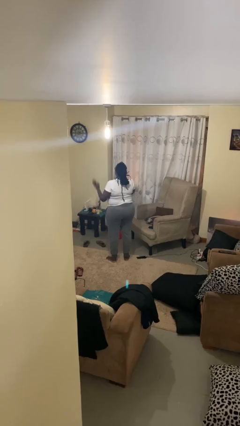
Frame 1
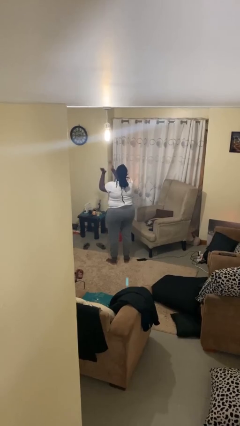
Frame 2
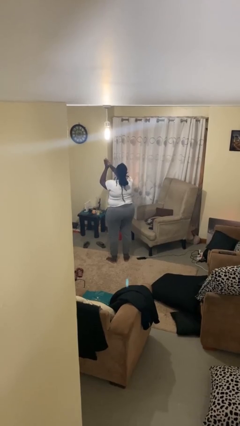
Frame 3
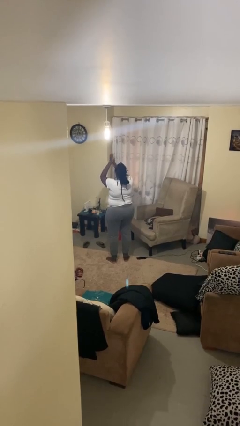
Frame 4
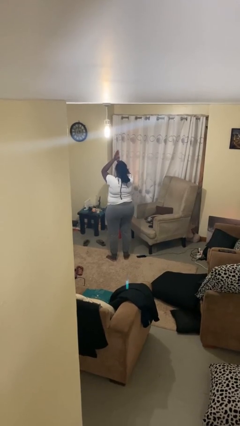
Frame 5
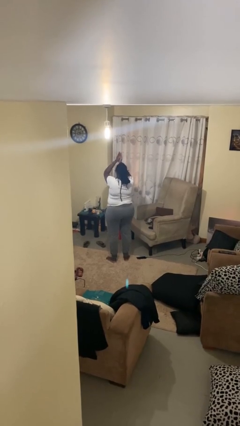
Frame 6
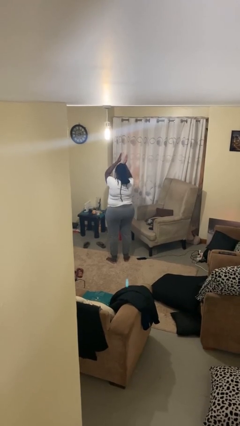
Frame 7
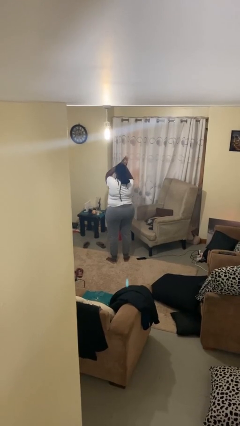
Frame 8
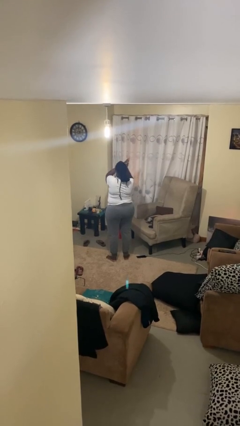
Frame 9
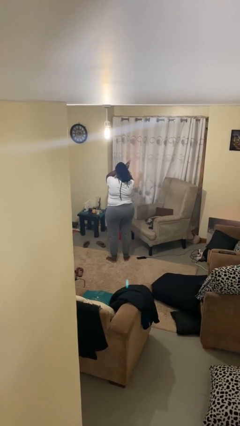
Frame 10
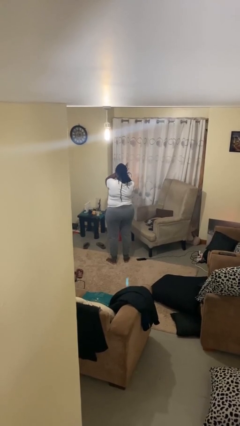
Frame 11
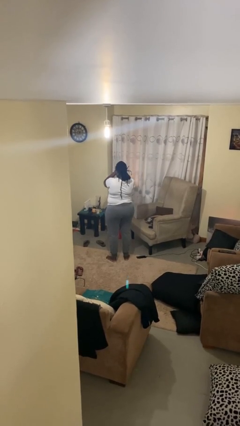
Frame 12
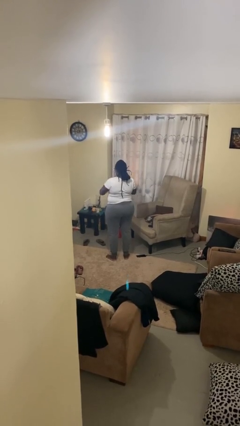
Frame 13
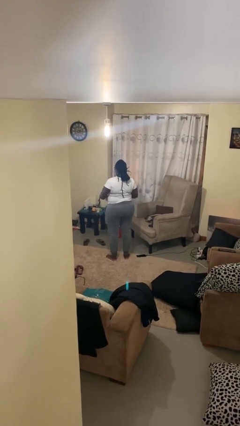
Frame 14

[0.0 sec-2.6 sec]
person claps hands

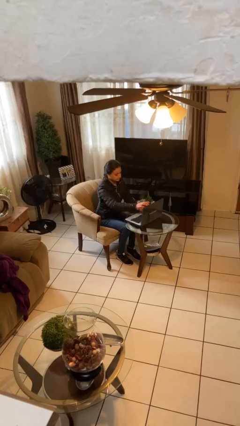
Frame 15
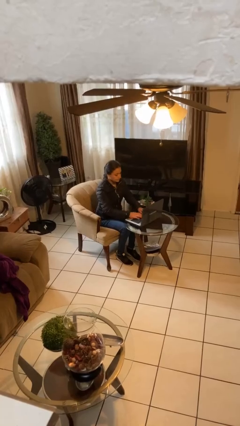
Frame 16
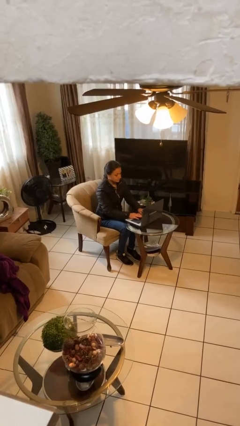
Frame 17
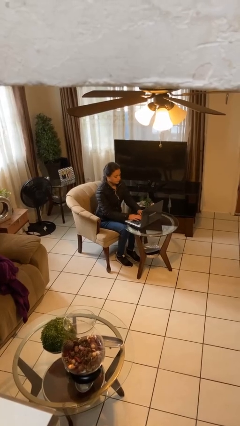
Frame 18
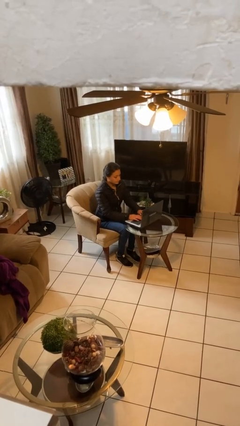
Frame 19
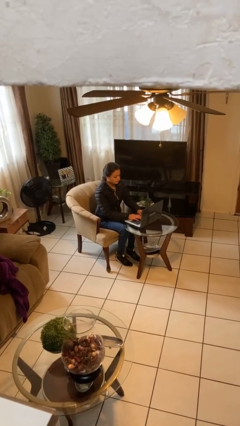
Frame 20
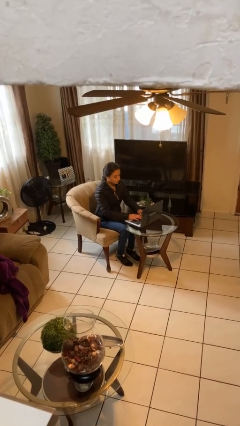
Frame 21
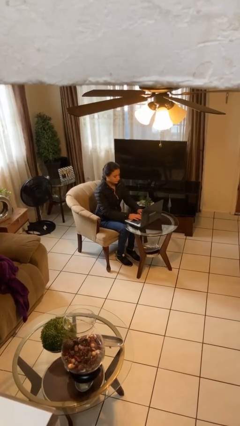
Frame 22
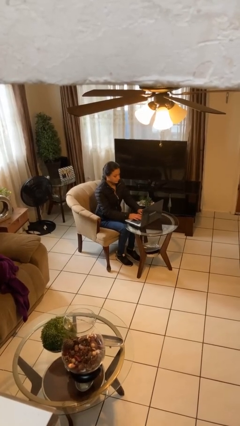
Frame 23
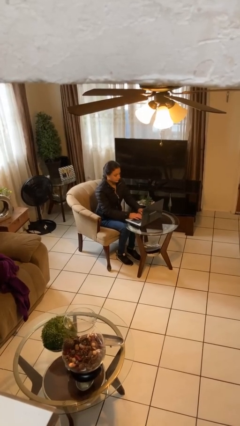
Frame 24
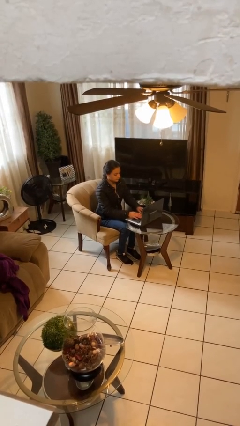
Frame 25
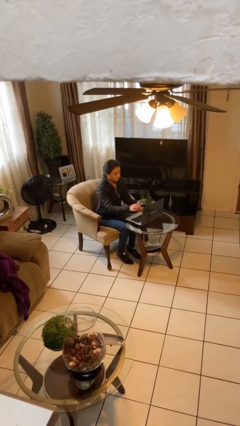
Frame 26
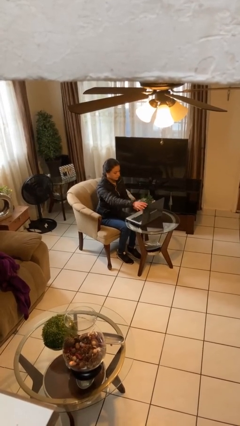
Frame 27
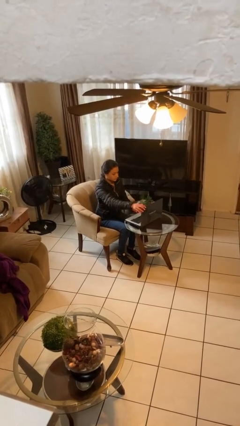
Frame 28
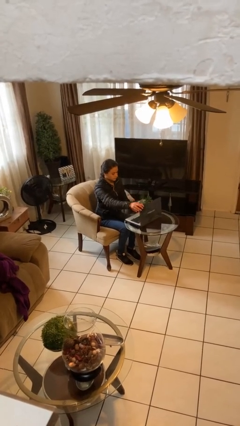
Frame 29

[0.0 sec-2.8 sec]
person interacts with laptop

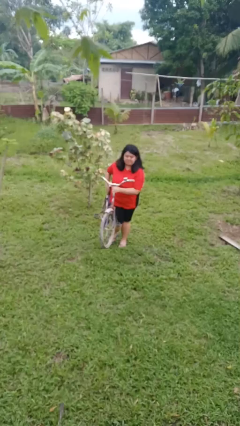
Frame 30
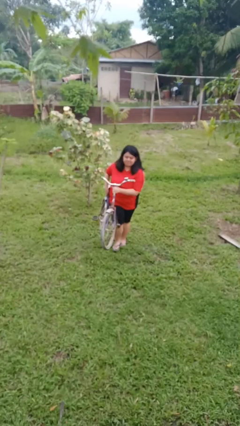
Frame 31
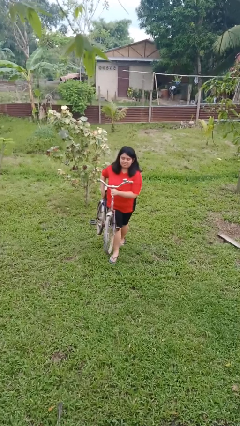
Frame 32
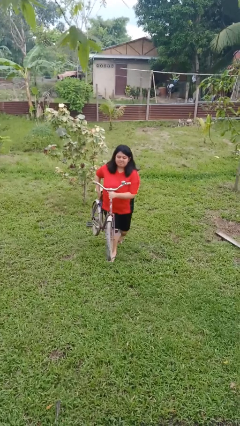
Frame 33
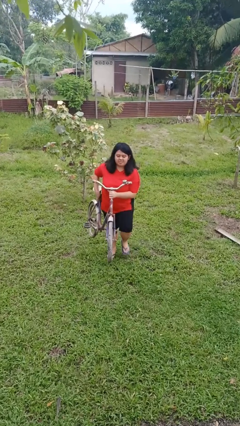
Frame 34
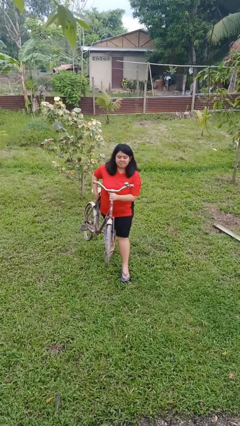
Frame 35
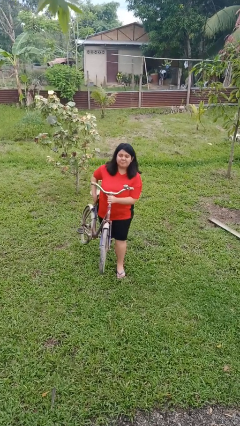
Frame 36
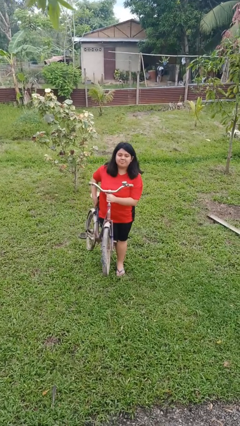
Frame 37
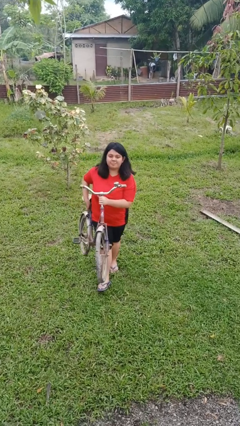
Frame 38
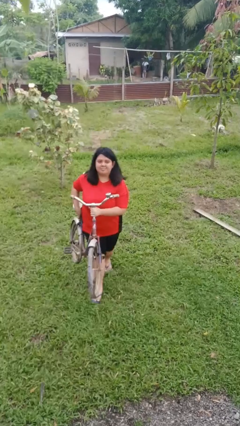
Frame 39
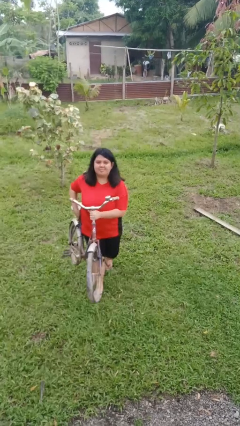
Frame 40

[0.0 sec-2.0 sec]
person carries bicycle

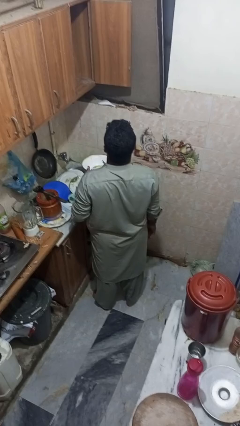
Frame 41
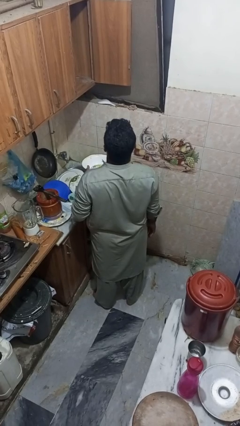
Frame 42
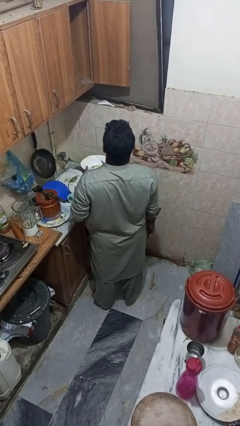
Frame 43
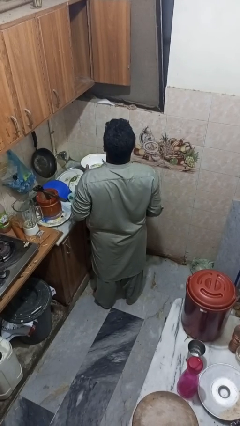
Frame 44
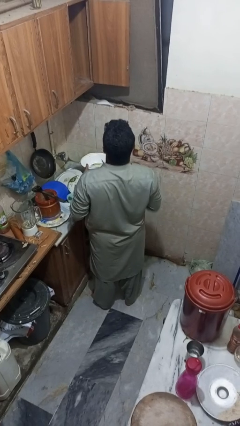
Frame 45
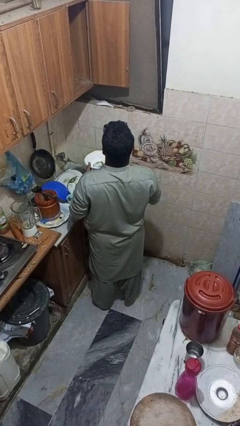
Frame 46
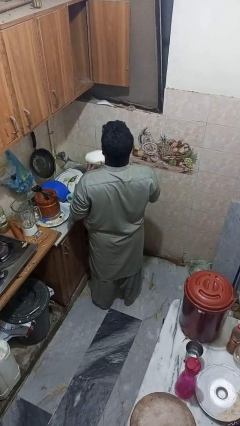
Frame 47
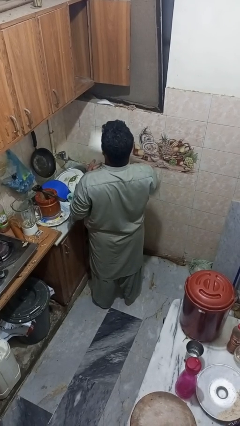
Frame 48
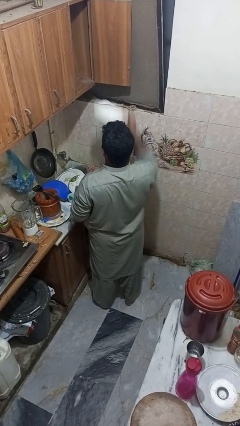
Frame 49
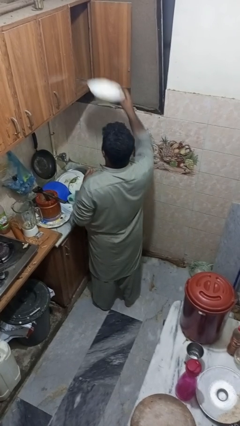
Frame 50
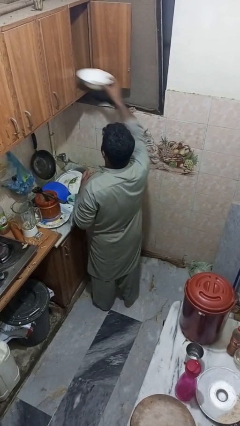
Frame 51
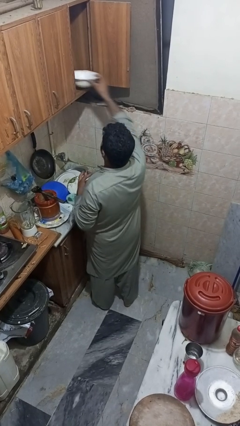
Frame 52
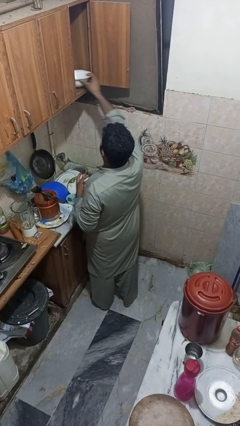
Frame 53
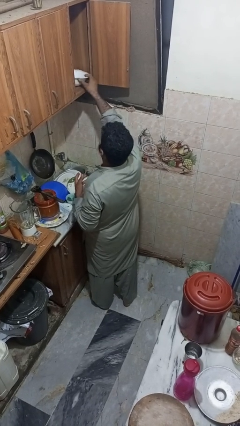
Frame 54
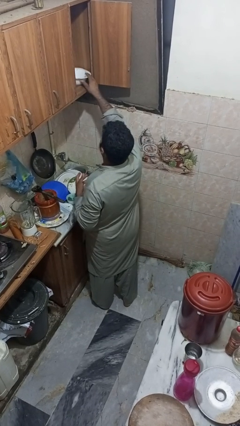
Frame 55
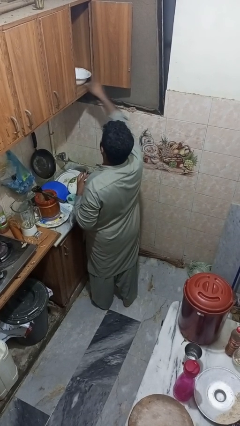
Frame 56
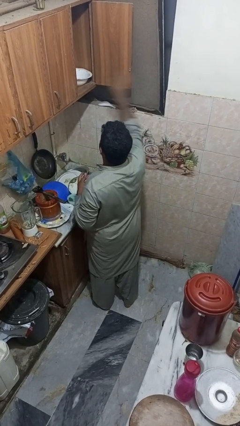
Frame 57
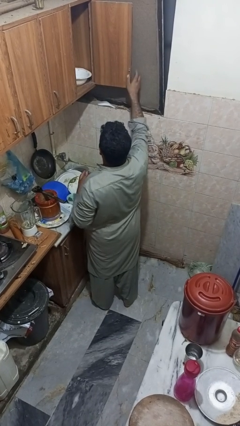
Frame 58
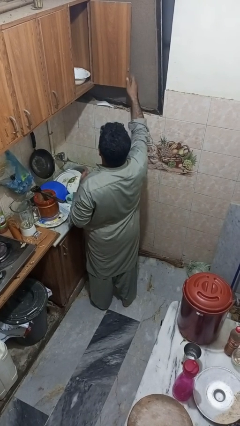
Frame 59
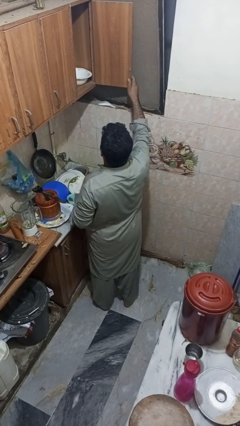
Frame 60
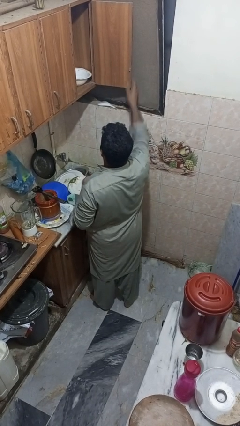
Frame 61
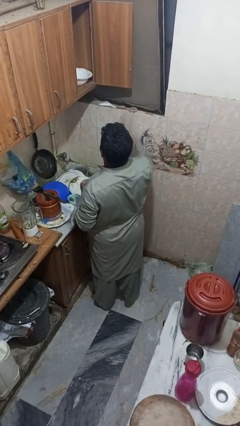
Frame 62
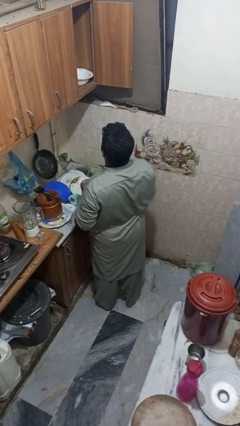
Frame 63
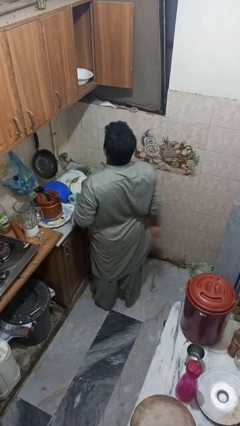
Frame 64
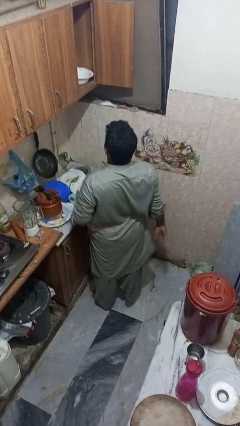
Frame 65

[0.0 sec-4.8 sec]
person puts object in cabinet

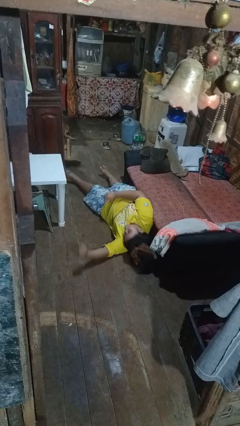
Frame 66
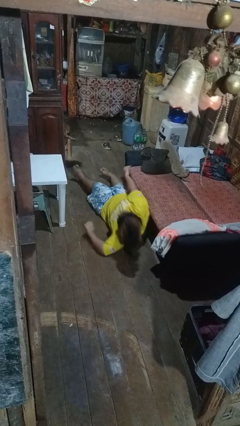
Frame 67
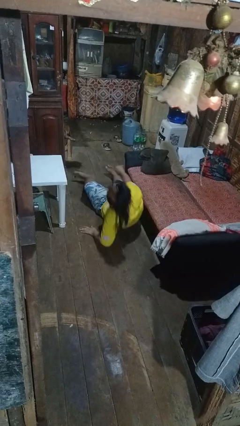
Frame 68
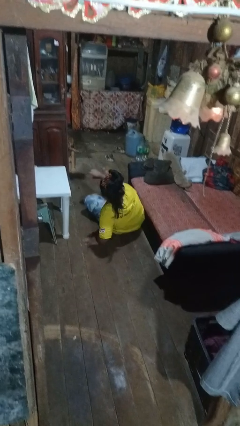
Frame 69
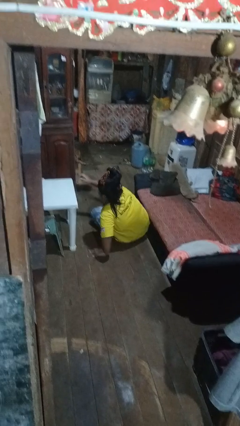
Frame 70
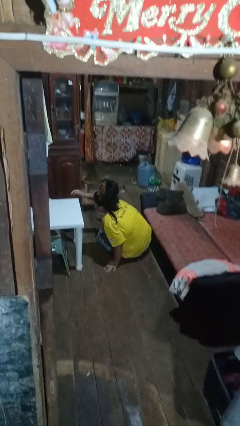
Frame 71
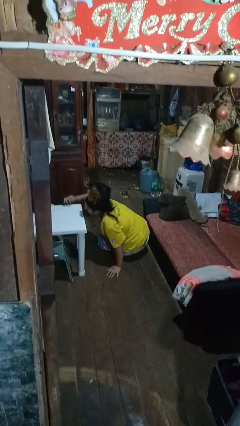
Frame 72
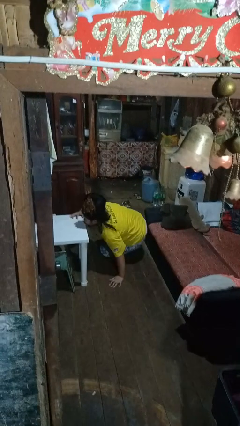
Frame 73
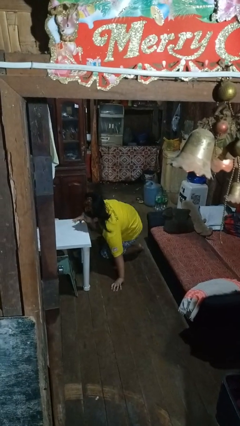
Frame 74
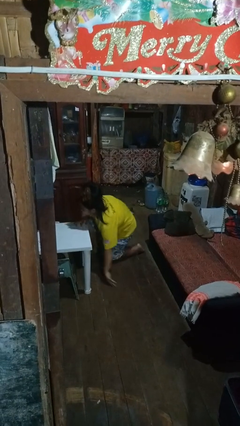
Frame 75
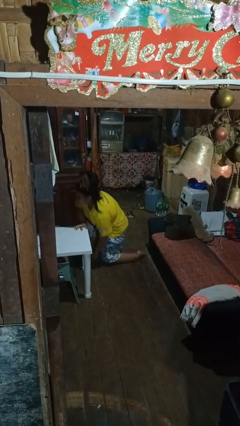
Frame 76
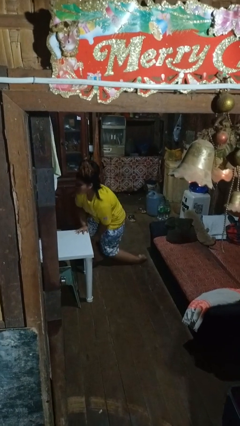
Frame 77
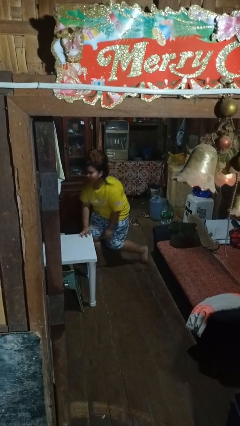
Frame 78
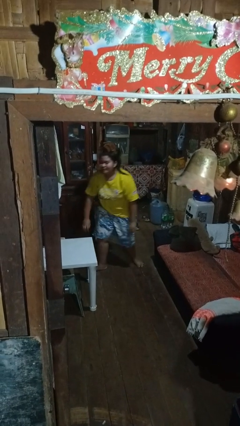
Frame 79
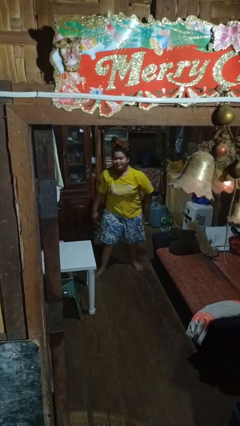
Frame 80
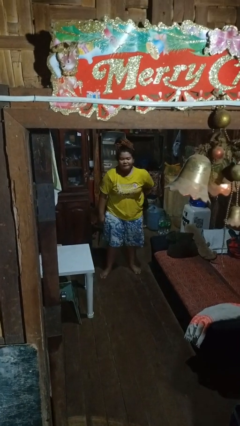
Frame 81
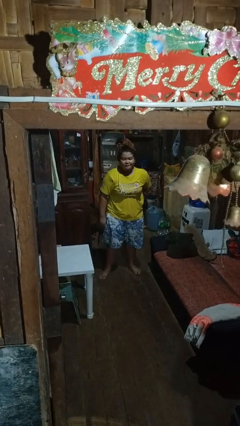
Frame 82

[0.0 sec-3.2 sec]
person stands up from floor

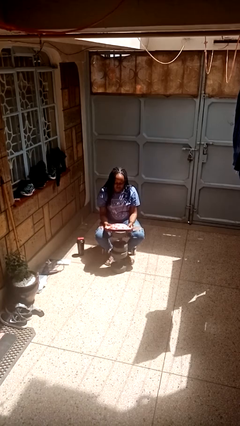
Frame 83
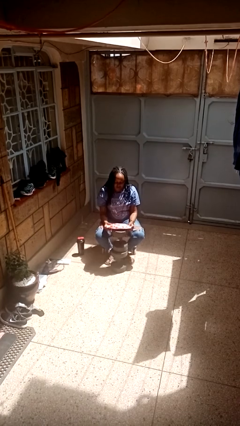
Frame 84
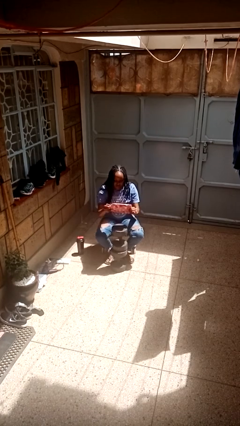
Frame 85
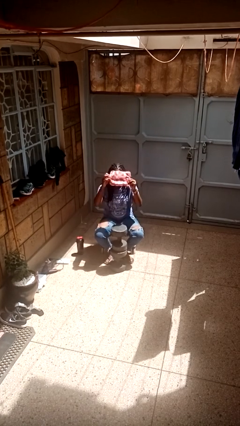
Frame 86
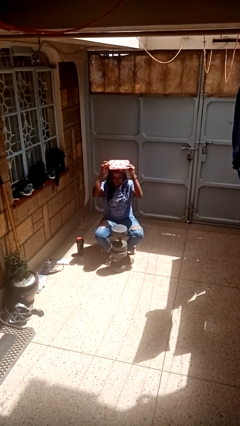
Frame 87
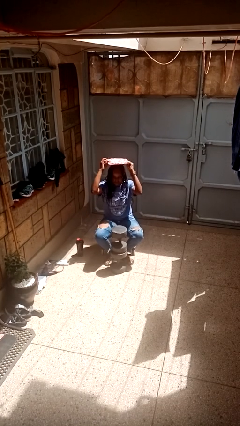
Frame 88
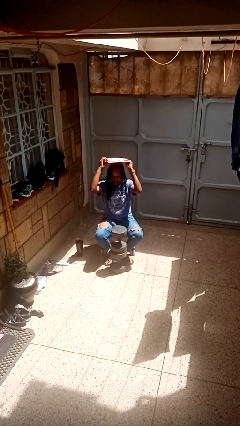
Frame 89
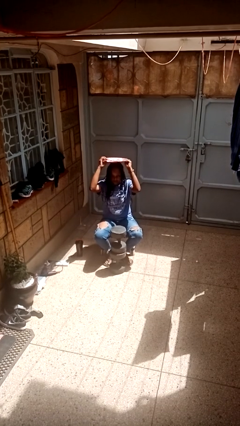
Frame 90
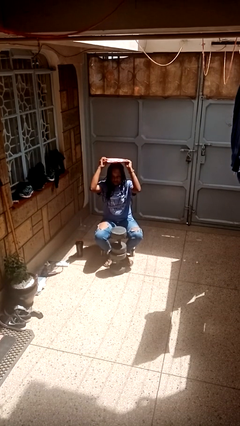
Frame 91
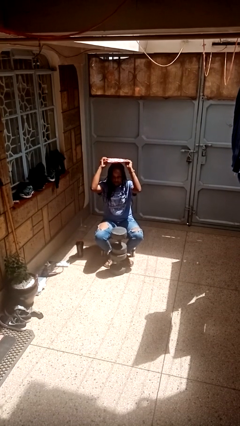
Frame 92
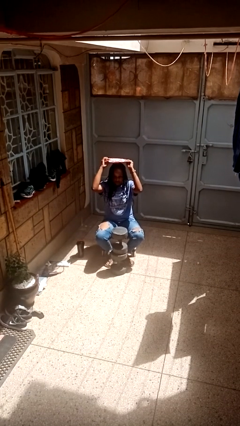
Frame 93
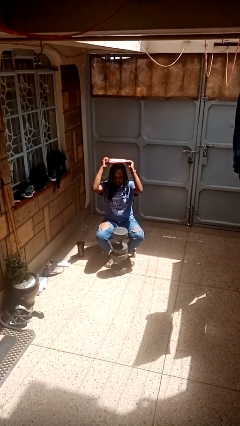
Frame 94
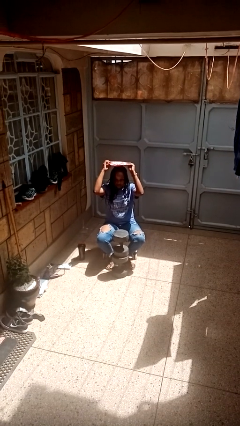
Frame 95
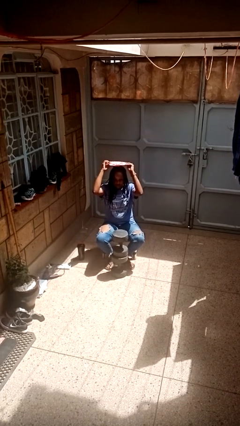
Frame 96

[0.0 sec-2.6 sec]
person holds object above head
